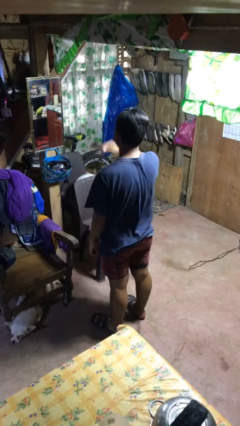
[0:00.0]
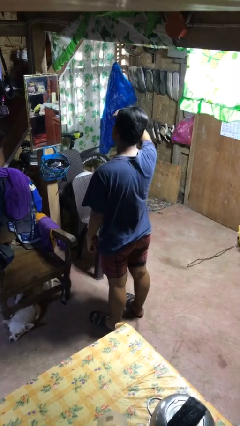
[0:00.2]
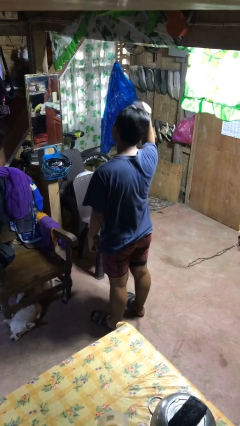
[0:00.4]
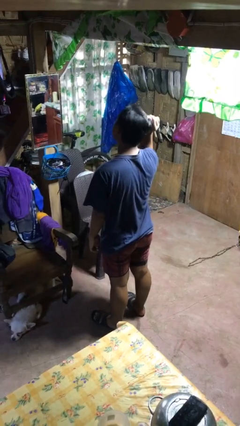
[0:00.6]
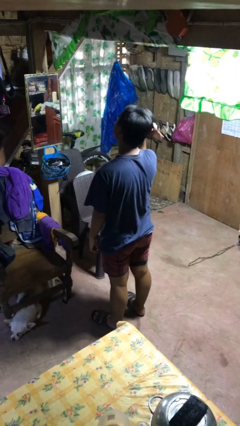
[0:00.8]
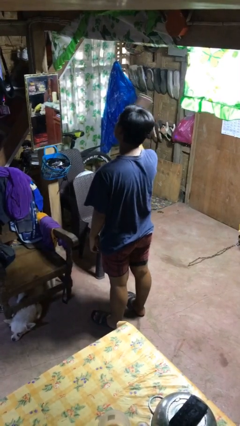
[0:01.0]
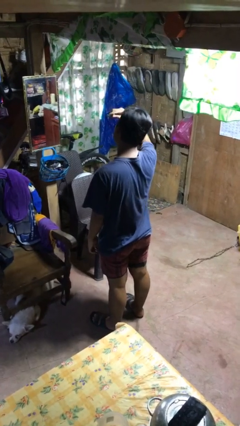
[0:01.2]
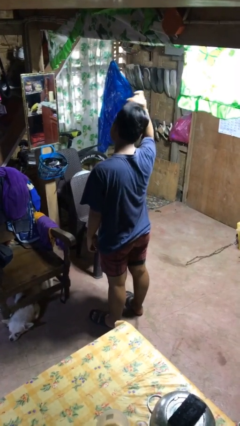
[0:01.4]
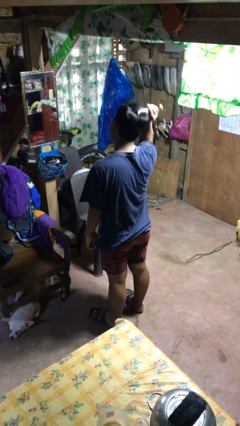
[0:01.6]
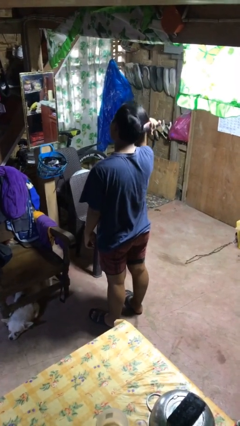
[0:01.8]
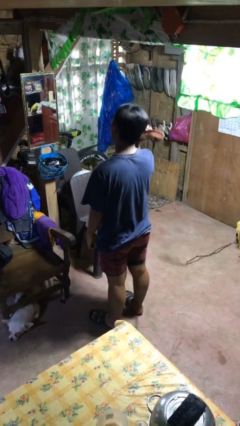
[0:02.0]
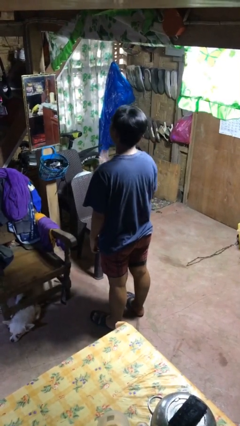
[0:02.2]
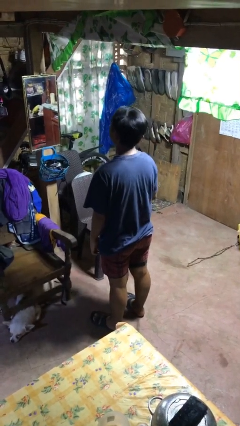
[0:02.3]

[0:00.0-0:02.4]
person brushes hair

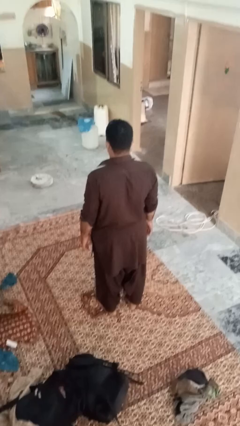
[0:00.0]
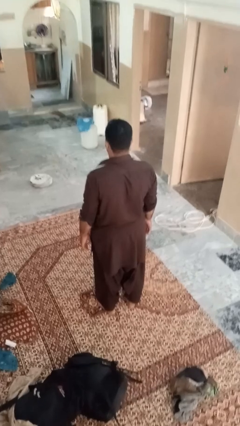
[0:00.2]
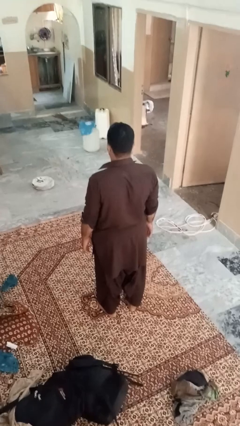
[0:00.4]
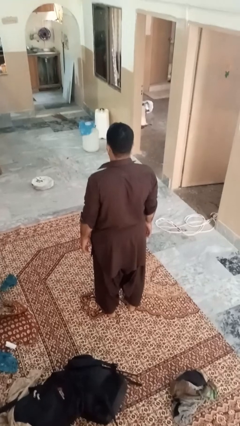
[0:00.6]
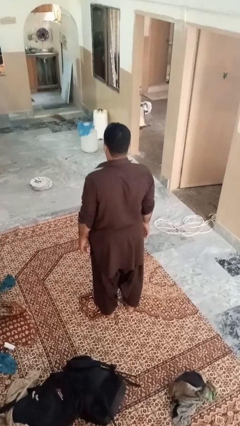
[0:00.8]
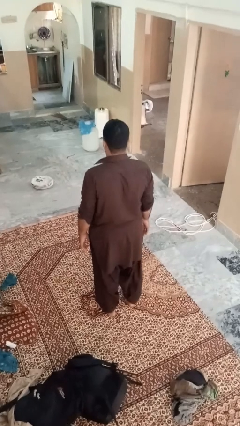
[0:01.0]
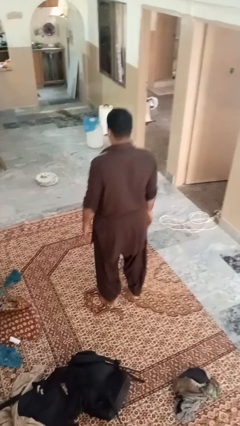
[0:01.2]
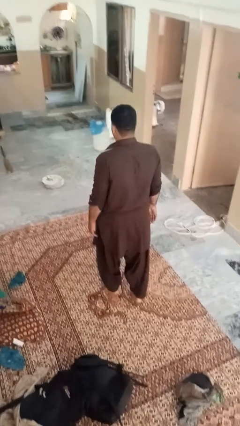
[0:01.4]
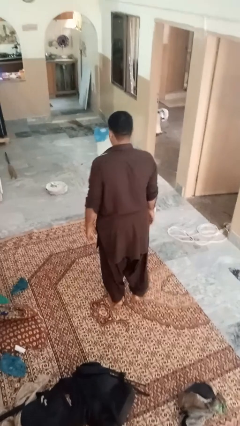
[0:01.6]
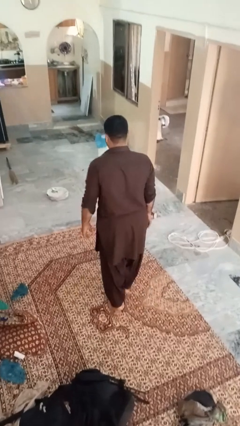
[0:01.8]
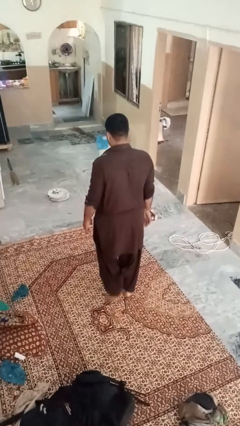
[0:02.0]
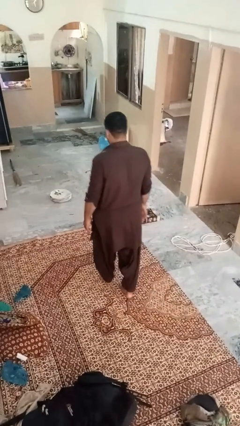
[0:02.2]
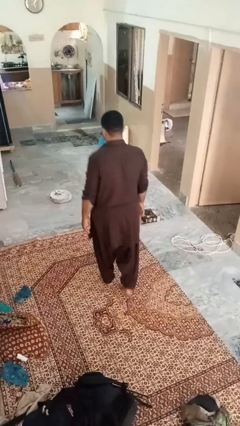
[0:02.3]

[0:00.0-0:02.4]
person walks tiptoe

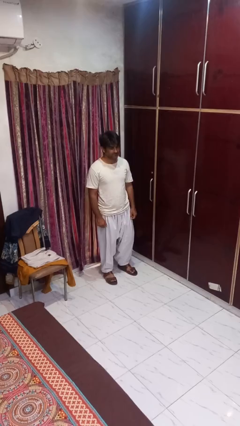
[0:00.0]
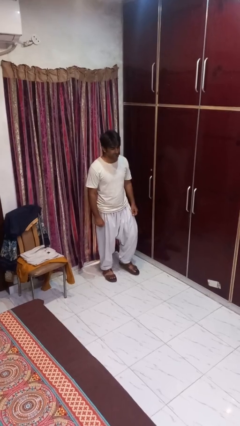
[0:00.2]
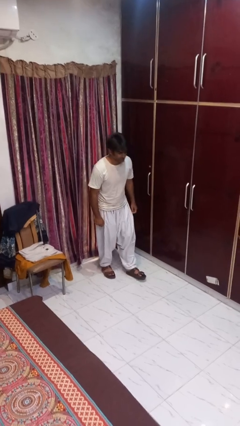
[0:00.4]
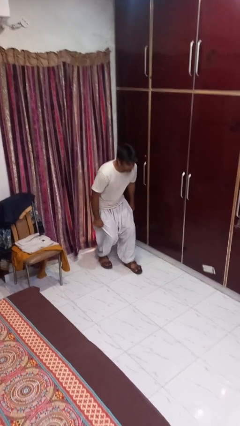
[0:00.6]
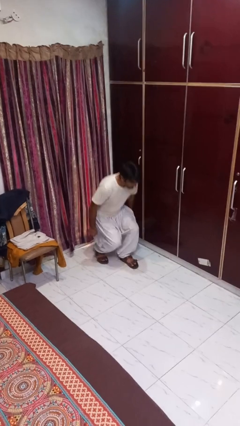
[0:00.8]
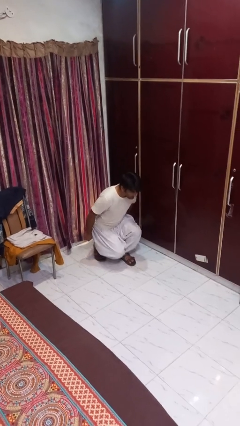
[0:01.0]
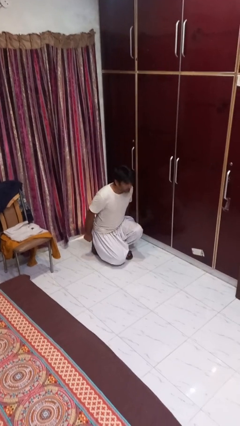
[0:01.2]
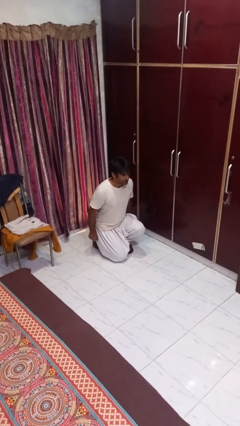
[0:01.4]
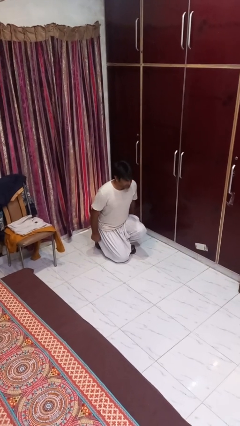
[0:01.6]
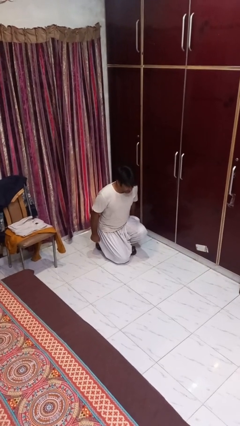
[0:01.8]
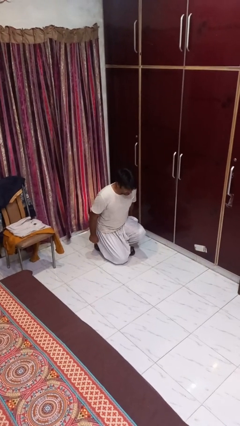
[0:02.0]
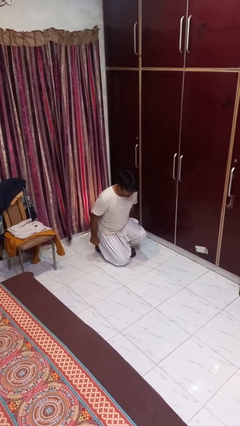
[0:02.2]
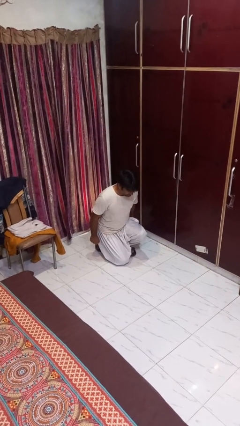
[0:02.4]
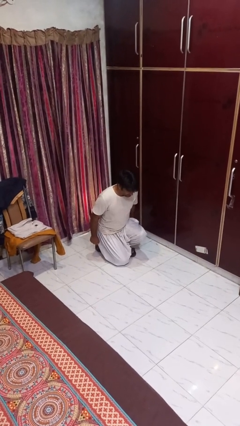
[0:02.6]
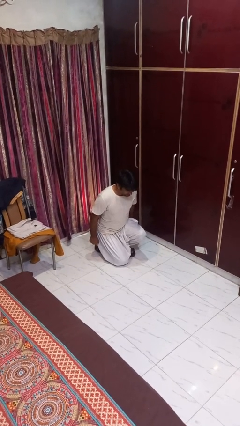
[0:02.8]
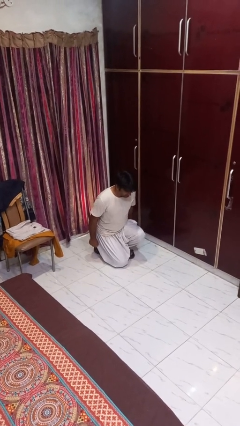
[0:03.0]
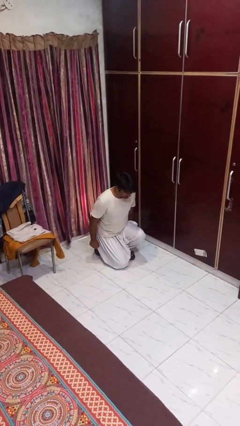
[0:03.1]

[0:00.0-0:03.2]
person kneels

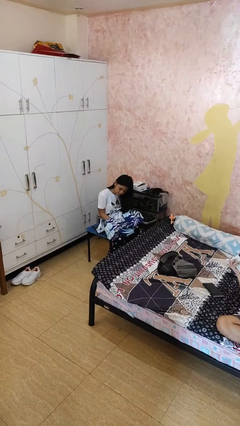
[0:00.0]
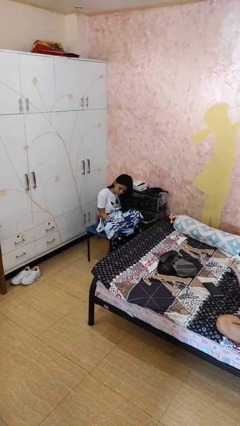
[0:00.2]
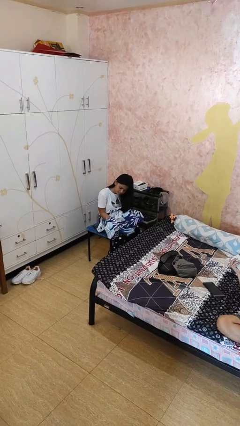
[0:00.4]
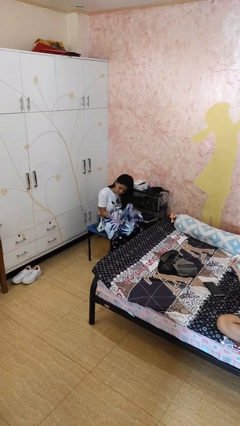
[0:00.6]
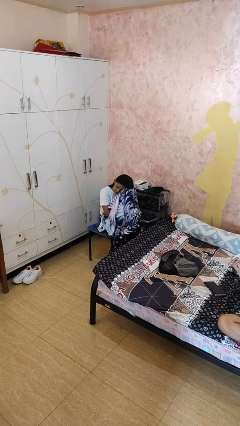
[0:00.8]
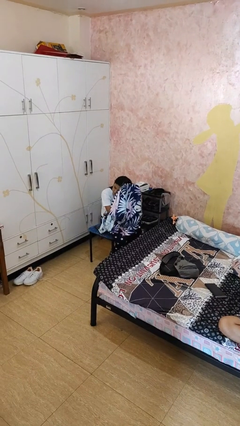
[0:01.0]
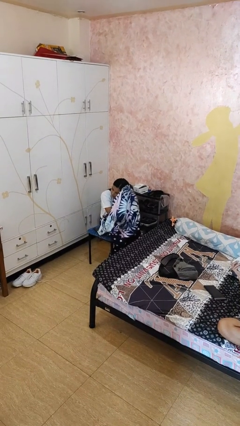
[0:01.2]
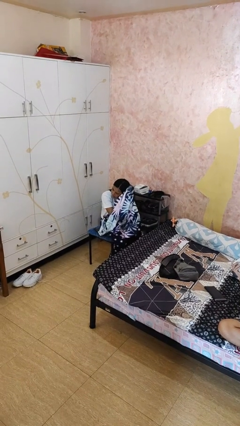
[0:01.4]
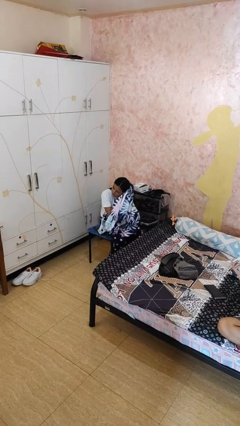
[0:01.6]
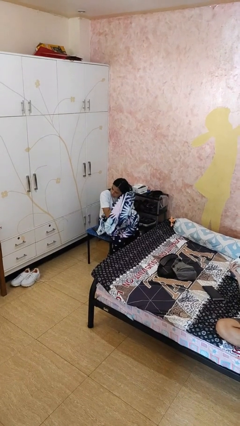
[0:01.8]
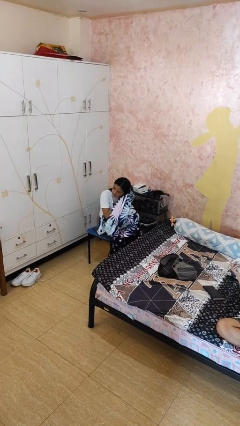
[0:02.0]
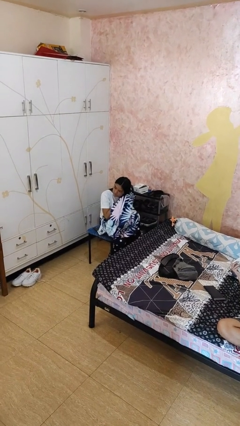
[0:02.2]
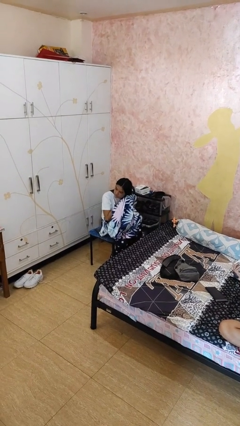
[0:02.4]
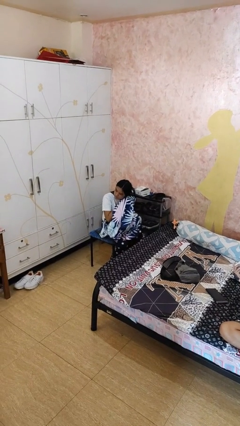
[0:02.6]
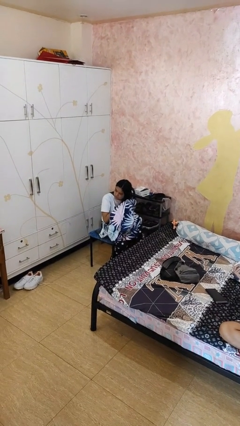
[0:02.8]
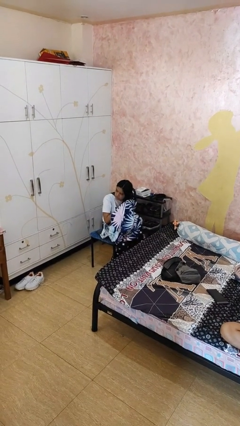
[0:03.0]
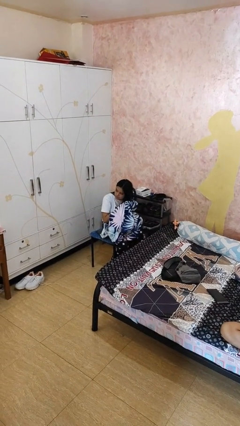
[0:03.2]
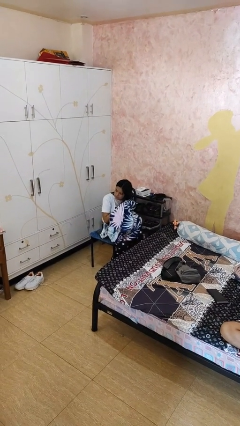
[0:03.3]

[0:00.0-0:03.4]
person dries hair with towel

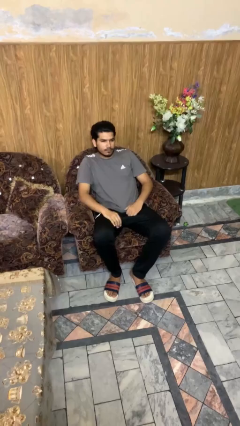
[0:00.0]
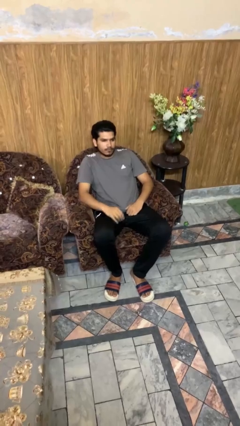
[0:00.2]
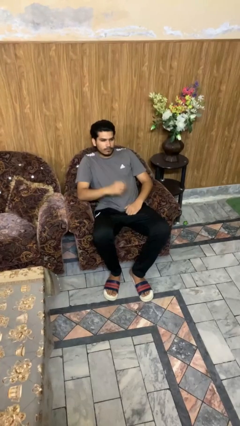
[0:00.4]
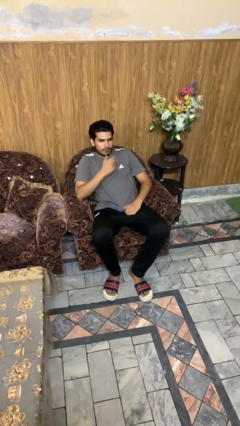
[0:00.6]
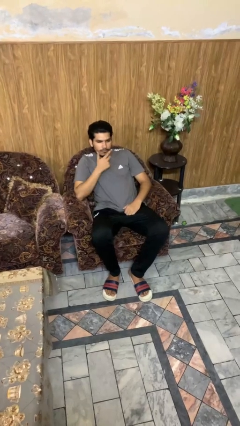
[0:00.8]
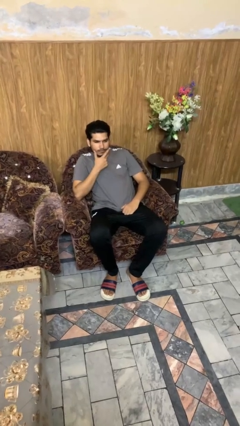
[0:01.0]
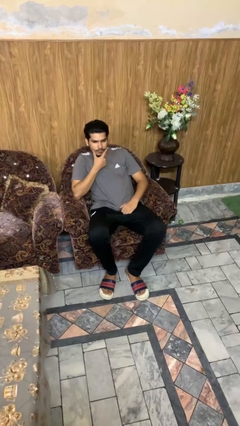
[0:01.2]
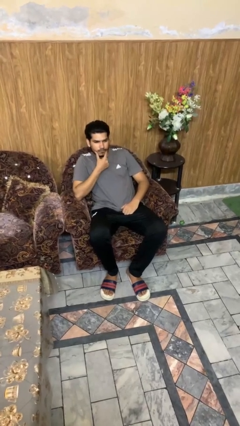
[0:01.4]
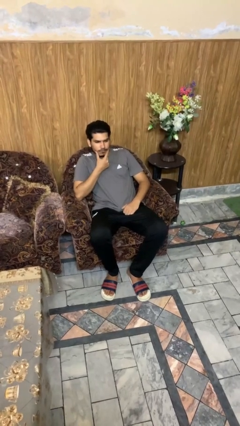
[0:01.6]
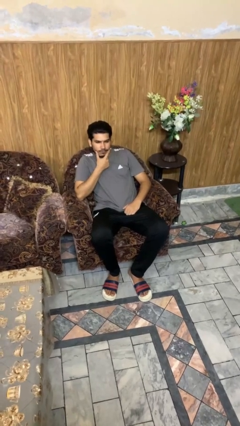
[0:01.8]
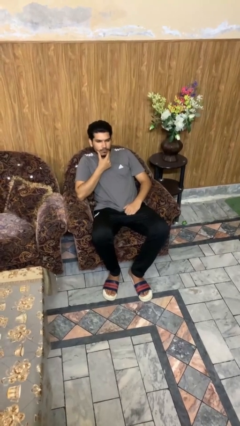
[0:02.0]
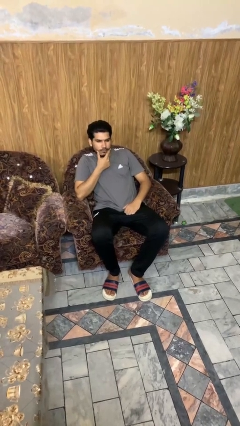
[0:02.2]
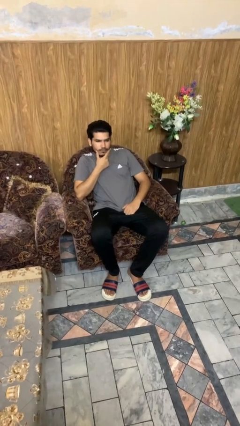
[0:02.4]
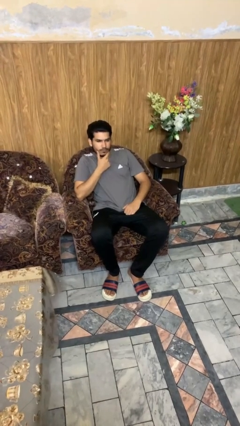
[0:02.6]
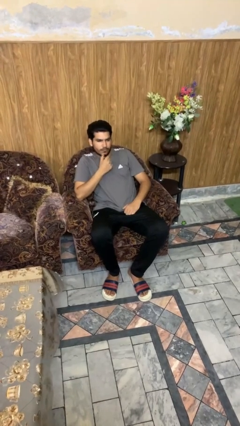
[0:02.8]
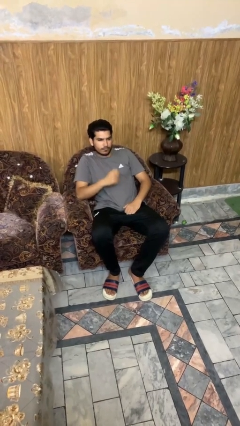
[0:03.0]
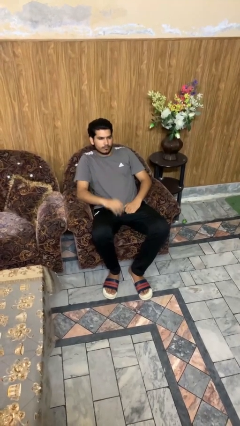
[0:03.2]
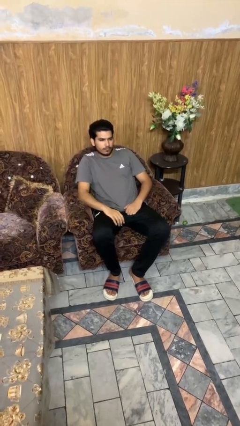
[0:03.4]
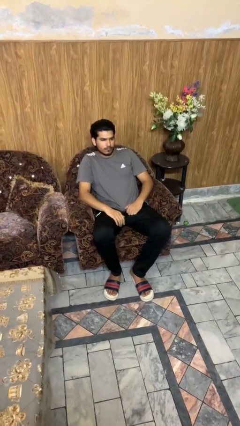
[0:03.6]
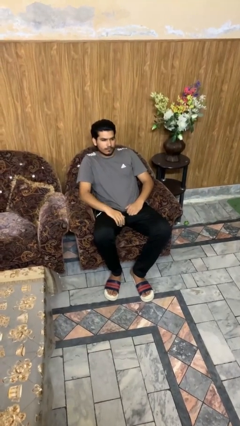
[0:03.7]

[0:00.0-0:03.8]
person strokes chin

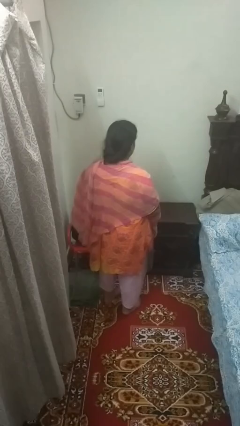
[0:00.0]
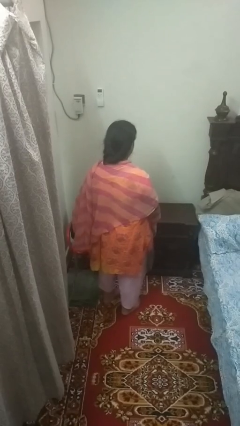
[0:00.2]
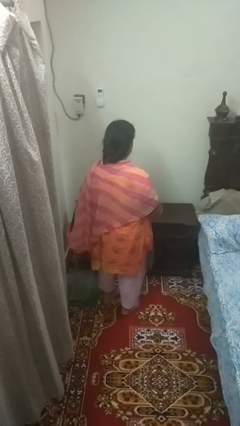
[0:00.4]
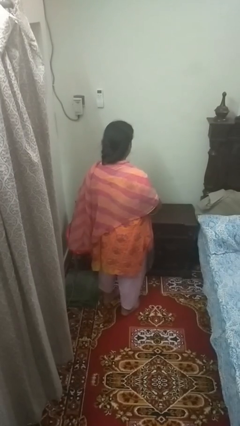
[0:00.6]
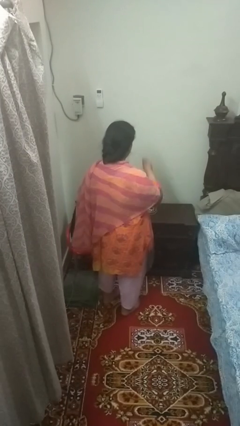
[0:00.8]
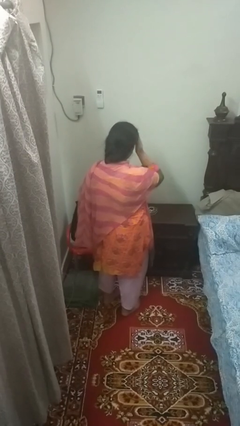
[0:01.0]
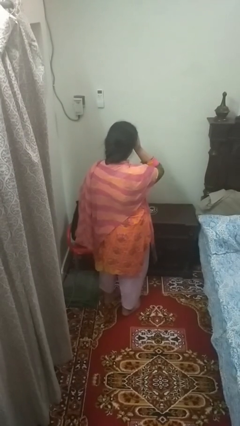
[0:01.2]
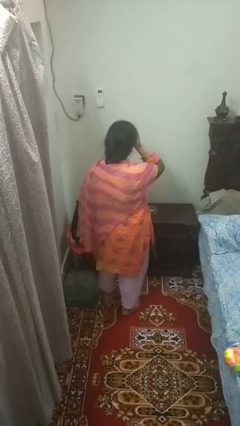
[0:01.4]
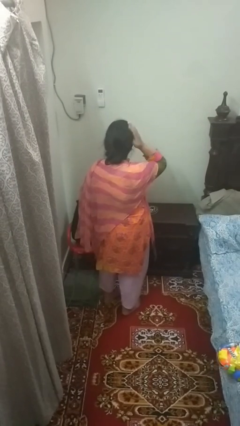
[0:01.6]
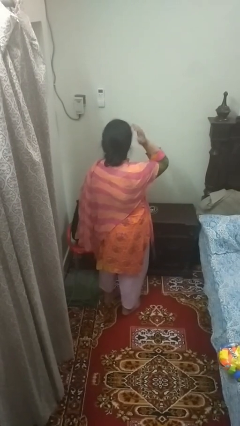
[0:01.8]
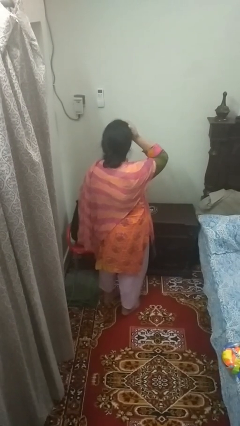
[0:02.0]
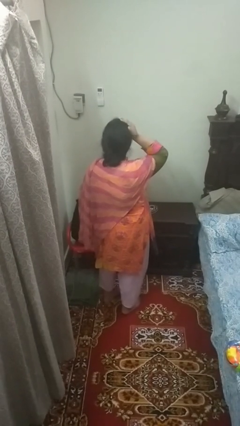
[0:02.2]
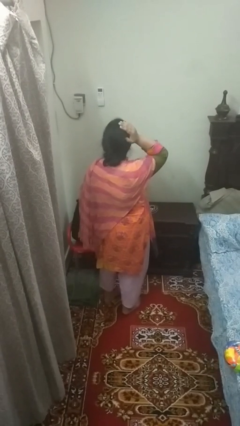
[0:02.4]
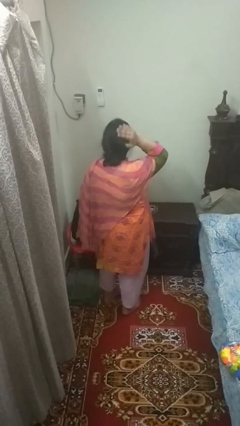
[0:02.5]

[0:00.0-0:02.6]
person strokes hair
